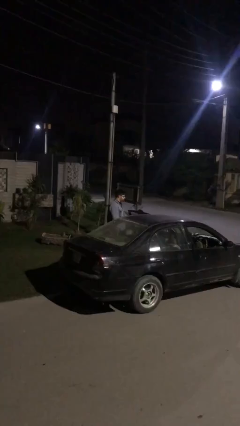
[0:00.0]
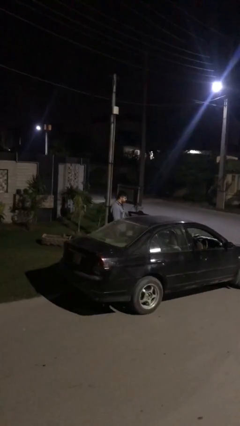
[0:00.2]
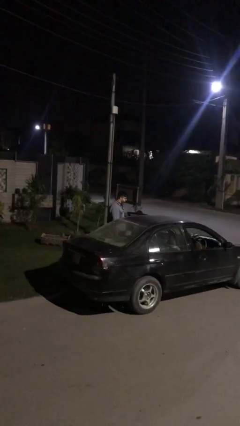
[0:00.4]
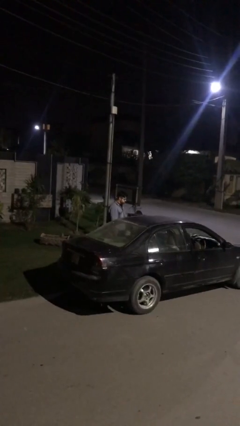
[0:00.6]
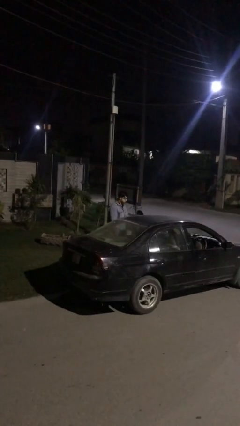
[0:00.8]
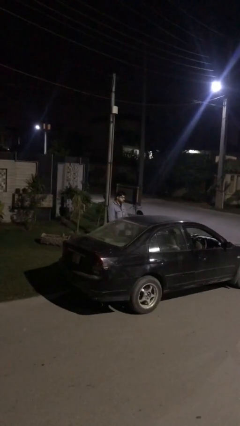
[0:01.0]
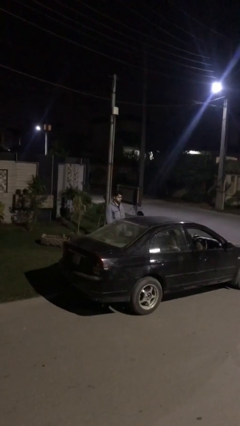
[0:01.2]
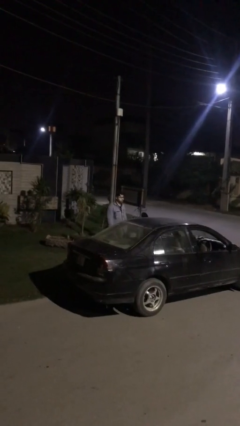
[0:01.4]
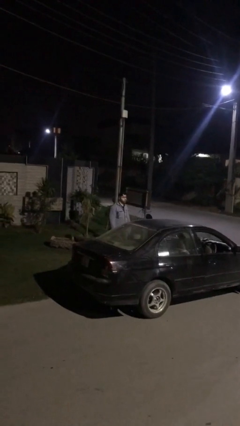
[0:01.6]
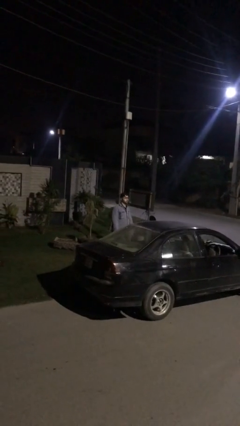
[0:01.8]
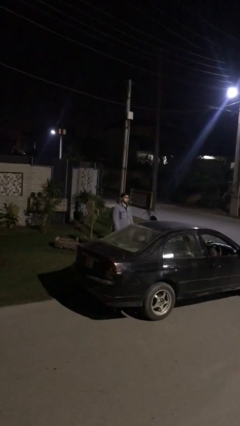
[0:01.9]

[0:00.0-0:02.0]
person closes car door

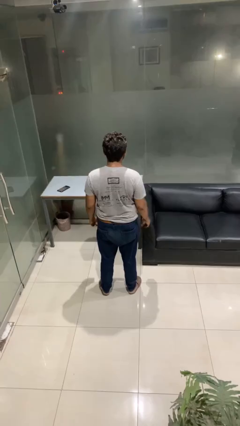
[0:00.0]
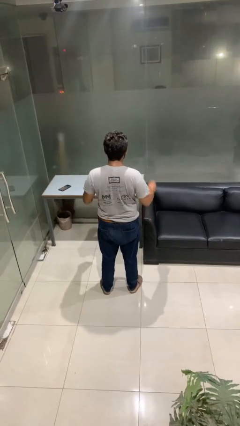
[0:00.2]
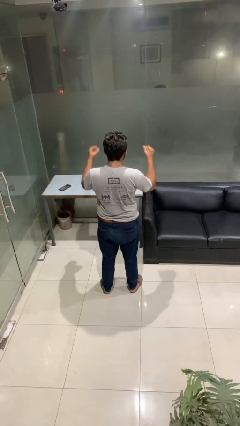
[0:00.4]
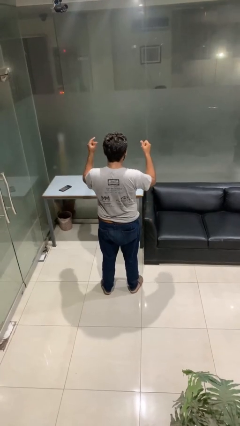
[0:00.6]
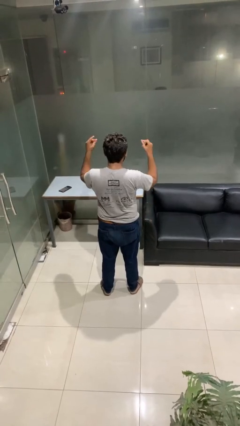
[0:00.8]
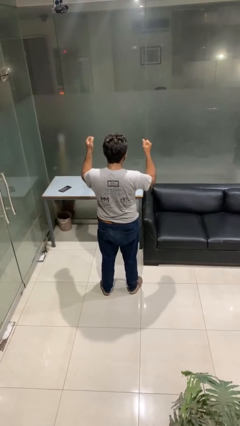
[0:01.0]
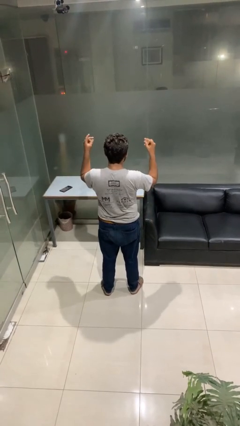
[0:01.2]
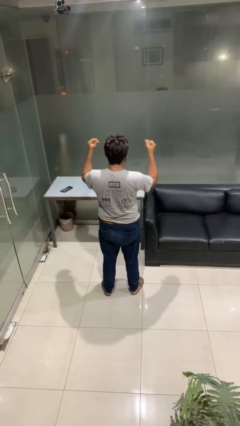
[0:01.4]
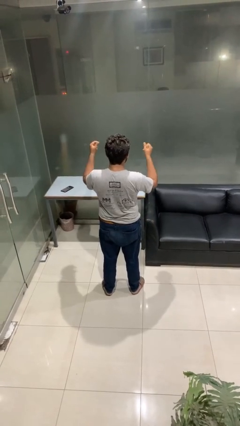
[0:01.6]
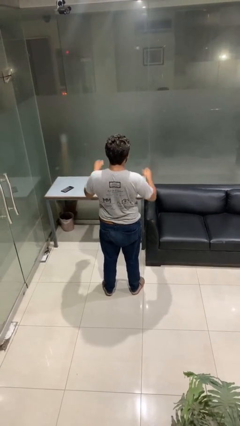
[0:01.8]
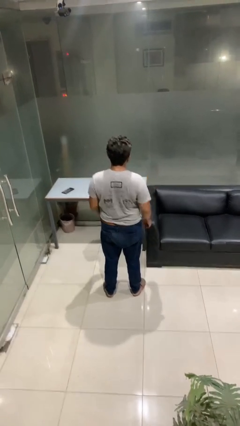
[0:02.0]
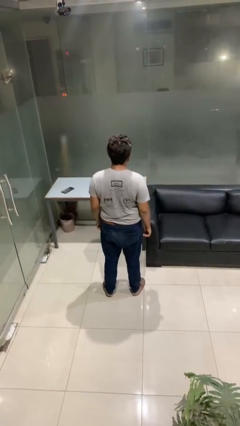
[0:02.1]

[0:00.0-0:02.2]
person snaps fingers

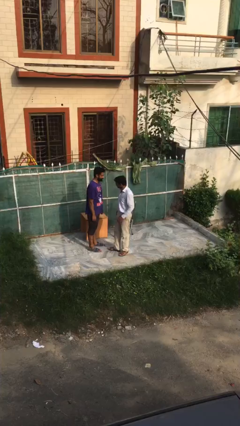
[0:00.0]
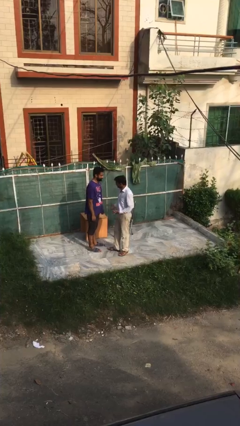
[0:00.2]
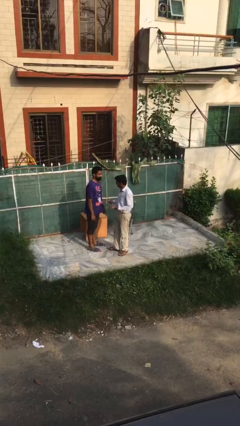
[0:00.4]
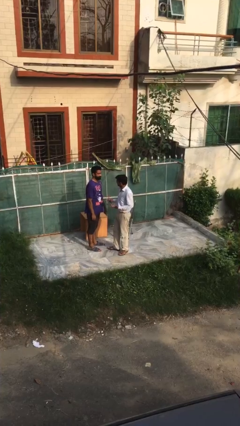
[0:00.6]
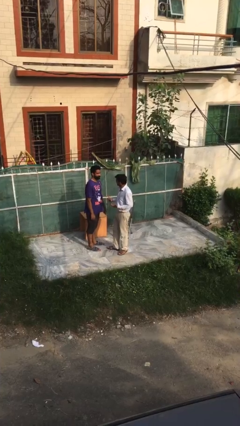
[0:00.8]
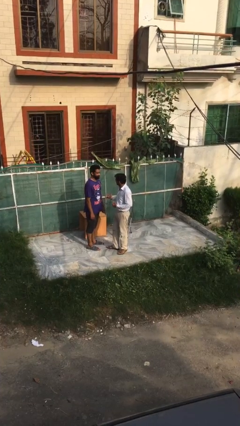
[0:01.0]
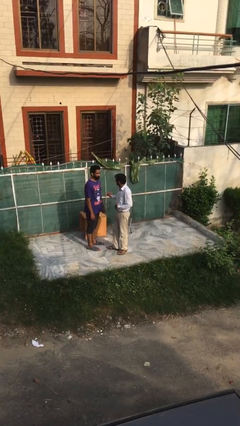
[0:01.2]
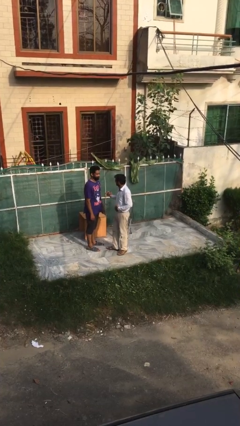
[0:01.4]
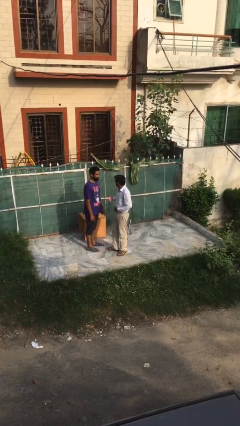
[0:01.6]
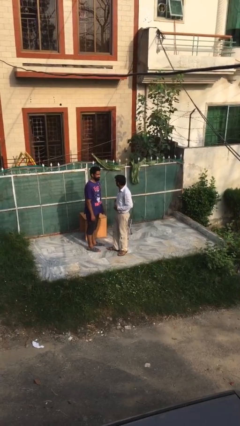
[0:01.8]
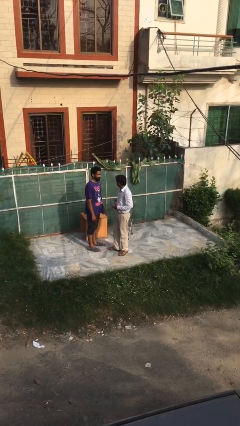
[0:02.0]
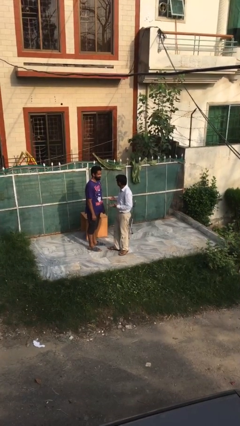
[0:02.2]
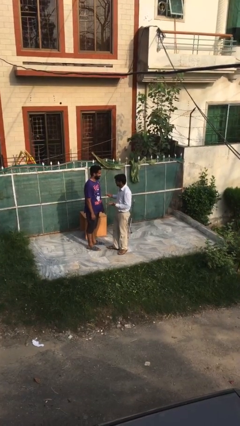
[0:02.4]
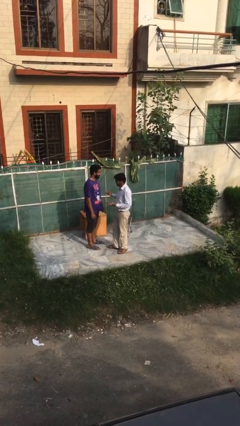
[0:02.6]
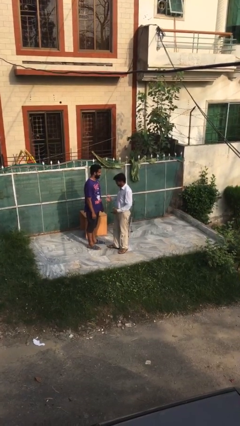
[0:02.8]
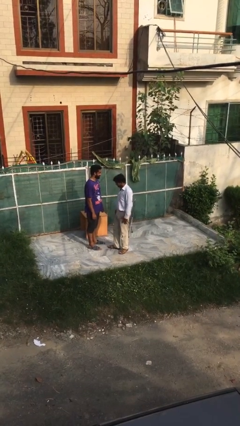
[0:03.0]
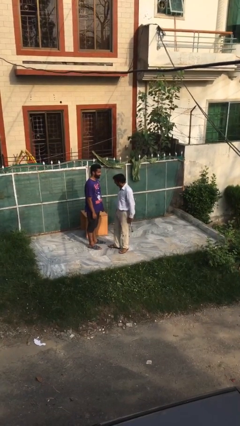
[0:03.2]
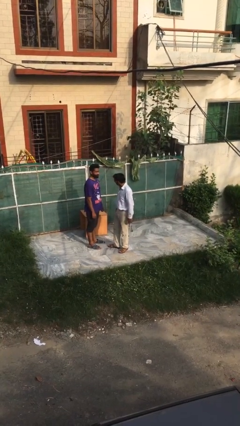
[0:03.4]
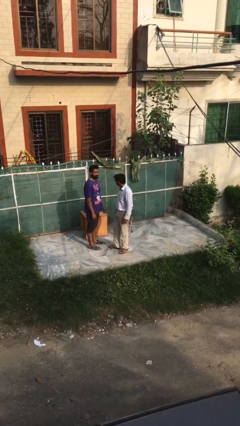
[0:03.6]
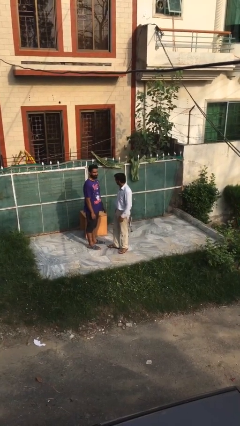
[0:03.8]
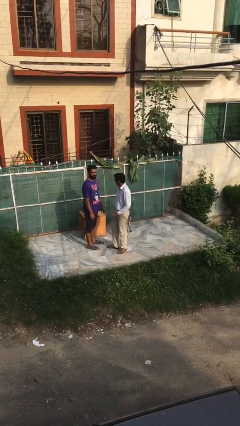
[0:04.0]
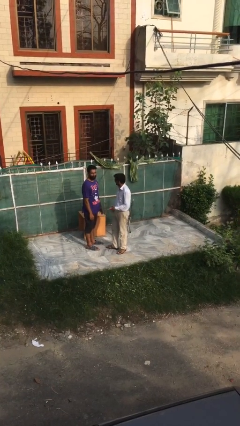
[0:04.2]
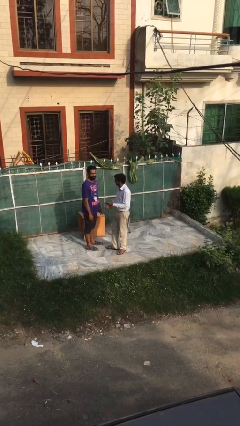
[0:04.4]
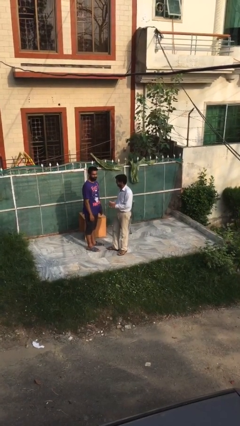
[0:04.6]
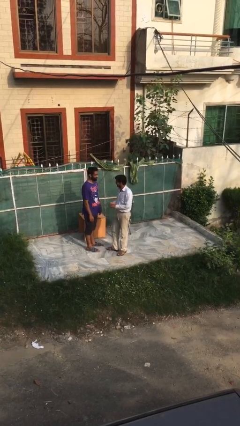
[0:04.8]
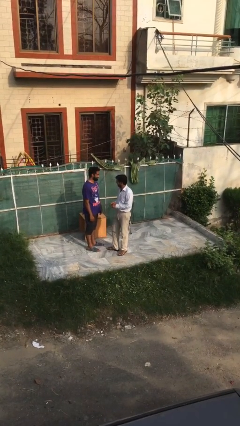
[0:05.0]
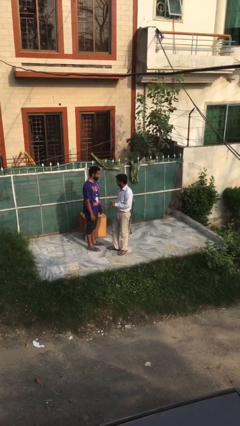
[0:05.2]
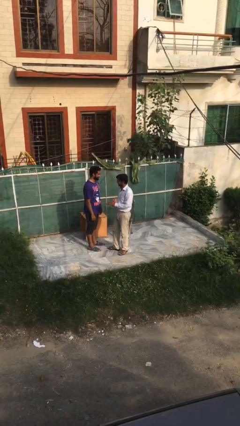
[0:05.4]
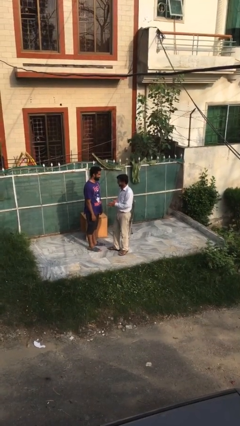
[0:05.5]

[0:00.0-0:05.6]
person talks to person

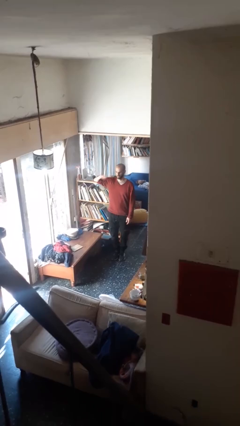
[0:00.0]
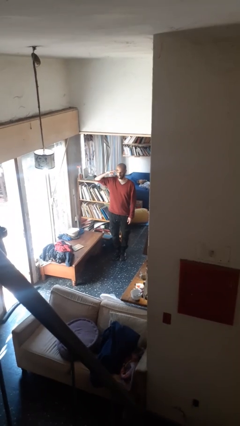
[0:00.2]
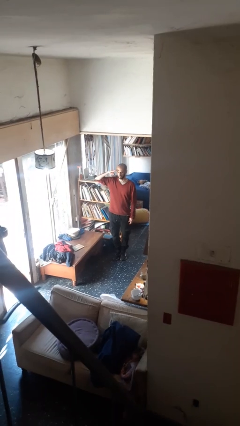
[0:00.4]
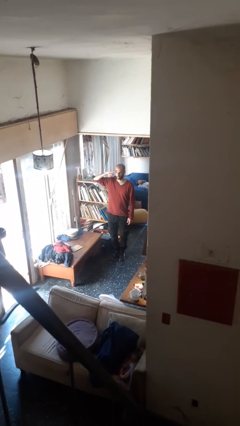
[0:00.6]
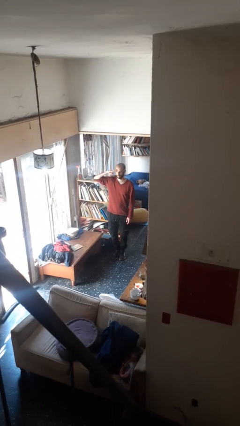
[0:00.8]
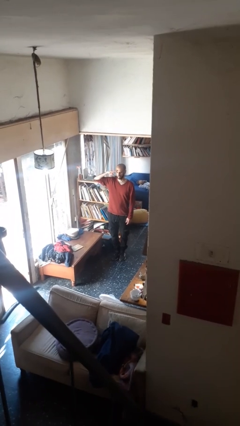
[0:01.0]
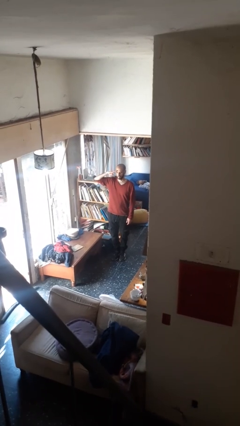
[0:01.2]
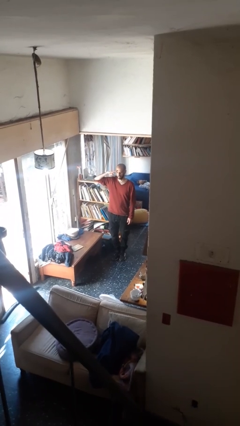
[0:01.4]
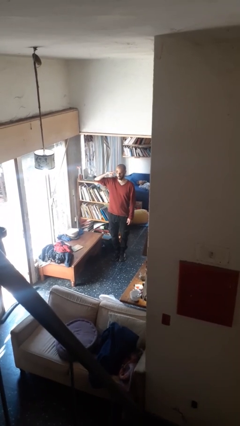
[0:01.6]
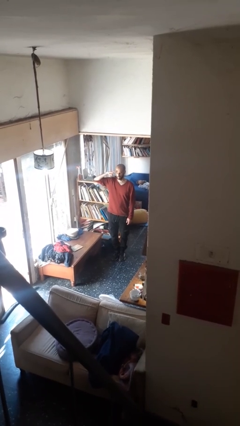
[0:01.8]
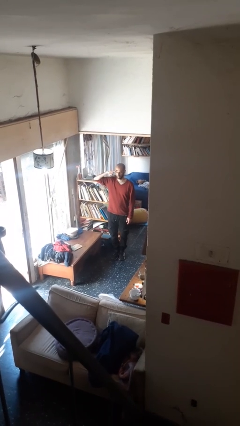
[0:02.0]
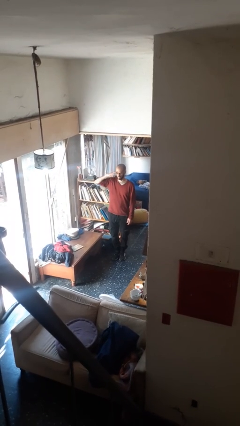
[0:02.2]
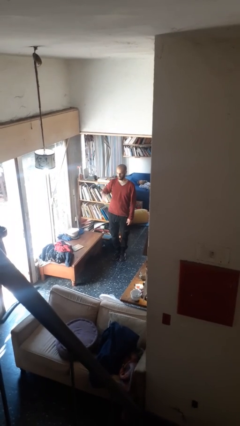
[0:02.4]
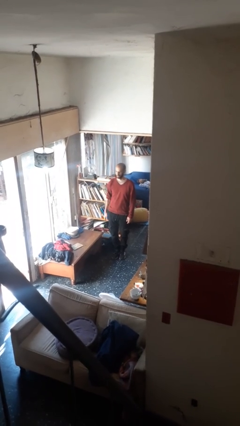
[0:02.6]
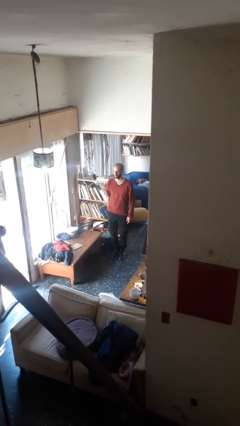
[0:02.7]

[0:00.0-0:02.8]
person salutes

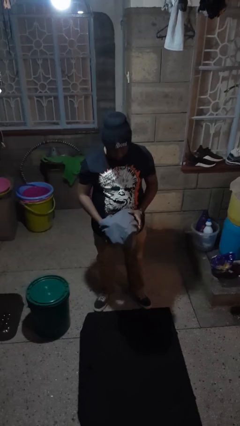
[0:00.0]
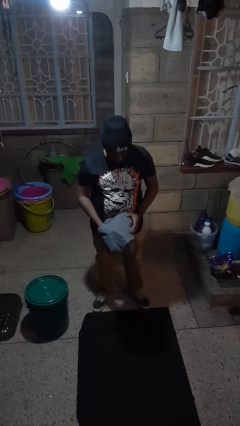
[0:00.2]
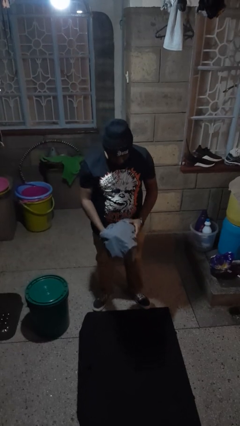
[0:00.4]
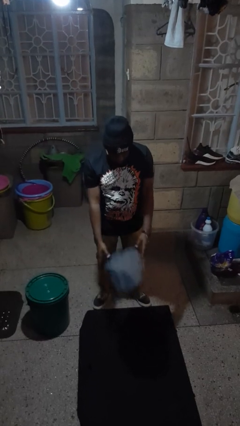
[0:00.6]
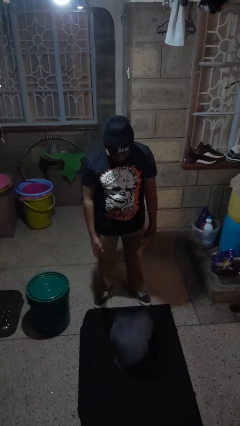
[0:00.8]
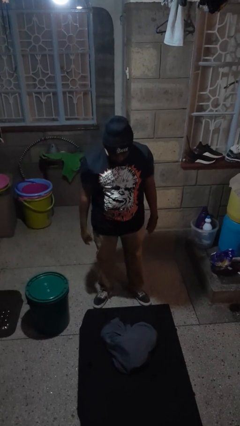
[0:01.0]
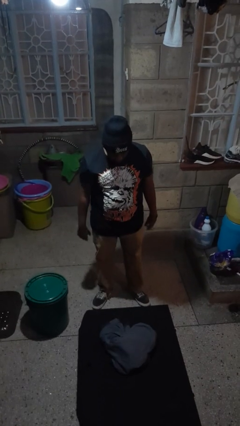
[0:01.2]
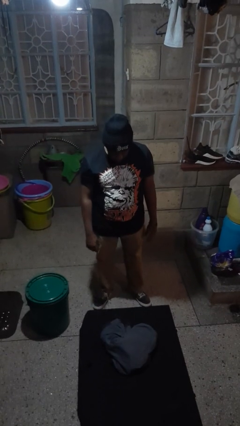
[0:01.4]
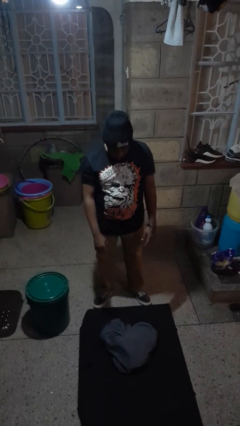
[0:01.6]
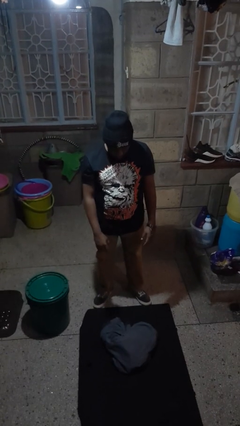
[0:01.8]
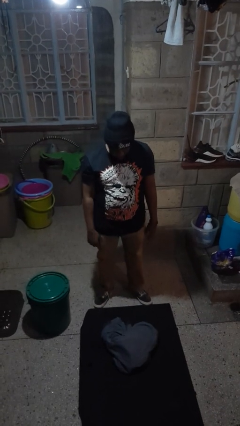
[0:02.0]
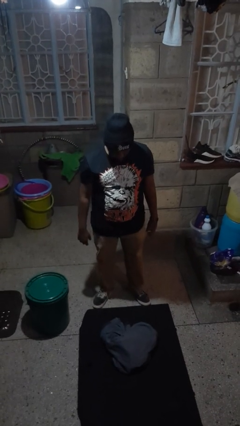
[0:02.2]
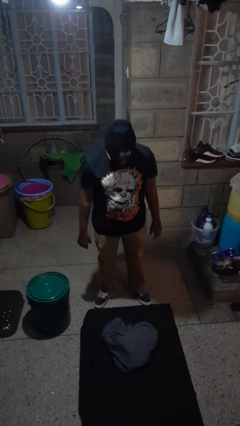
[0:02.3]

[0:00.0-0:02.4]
person drops object

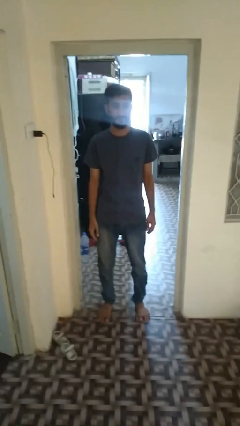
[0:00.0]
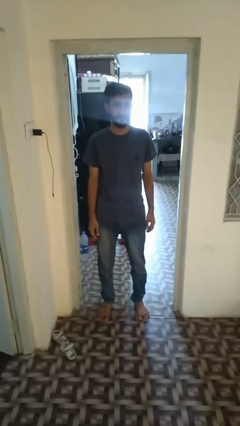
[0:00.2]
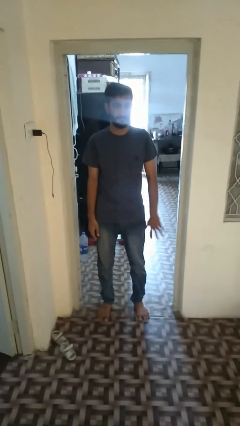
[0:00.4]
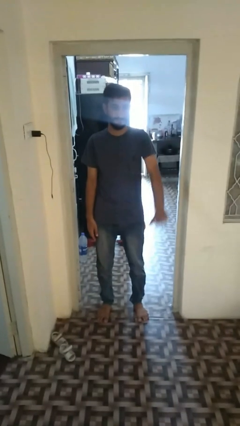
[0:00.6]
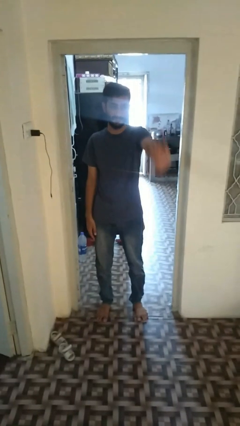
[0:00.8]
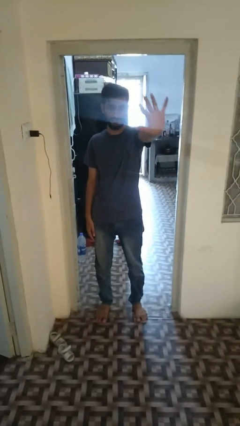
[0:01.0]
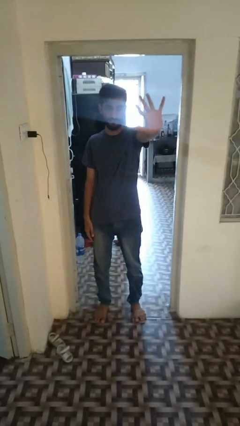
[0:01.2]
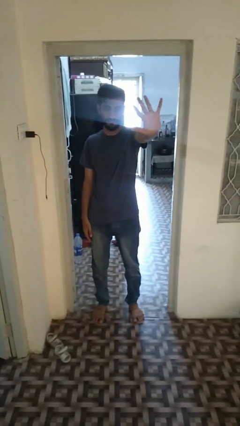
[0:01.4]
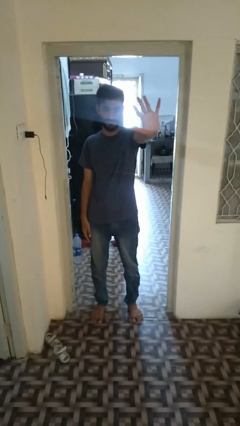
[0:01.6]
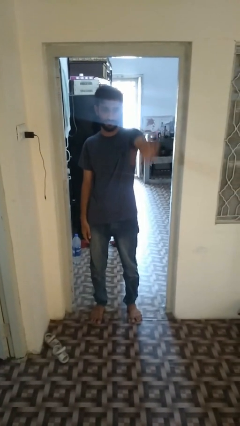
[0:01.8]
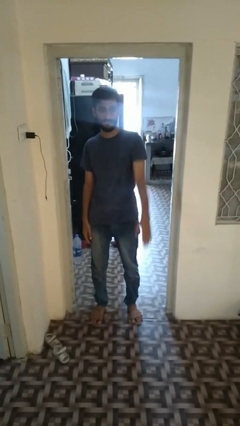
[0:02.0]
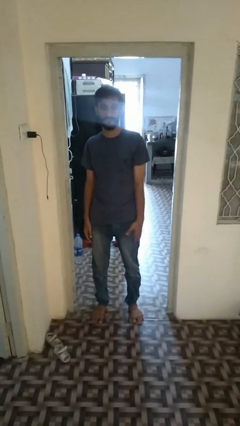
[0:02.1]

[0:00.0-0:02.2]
person gestures number five

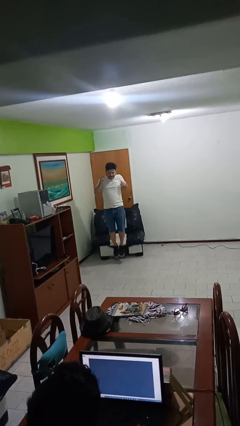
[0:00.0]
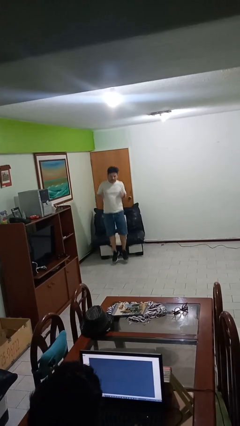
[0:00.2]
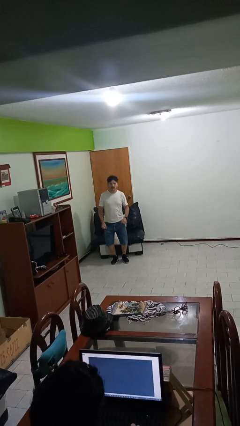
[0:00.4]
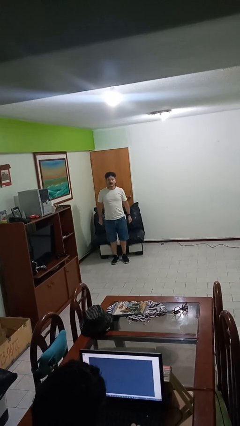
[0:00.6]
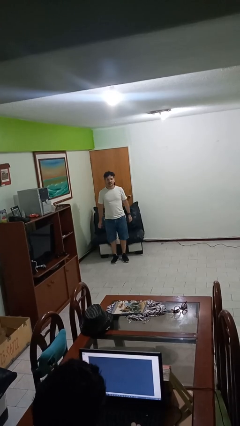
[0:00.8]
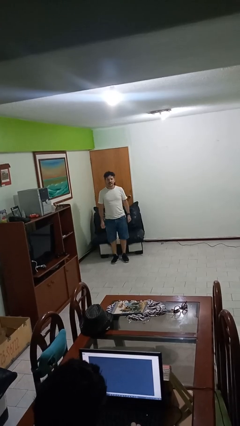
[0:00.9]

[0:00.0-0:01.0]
person jumps
